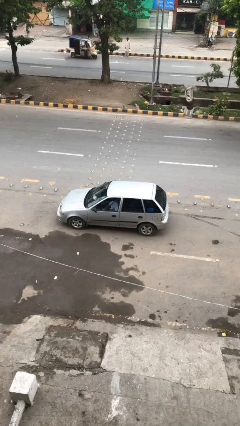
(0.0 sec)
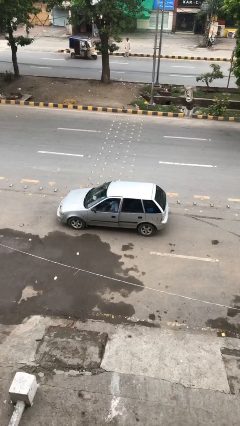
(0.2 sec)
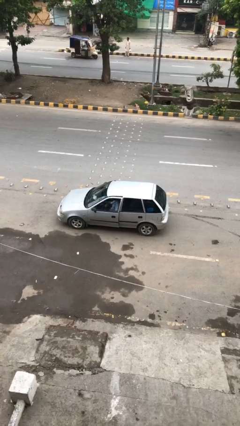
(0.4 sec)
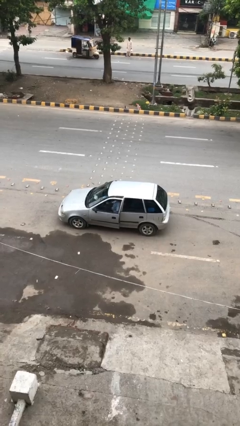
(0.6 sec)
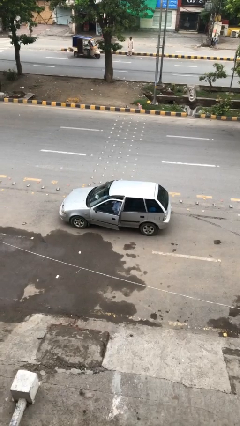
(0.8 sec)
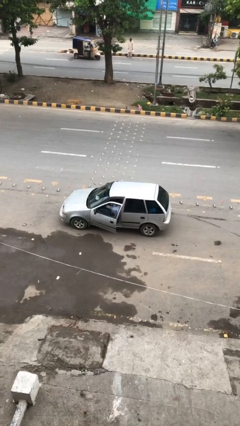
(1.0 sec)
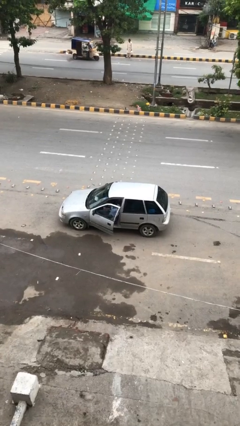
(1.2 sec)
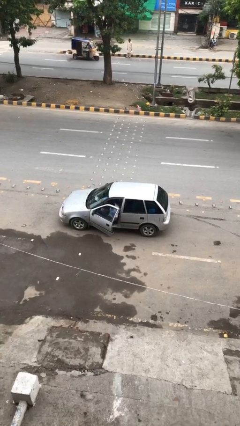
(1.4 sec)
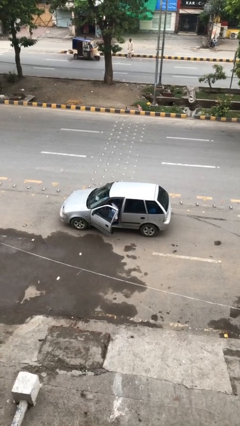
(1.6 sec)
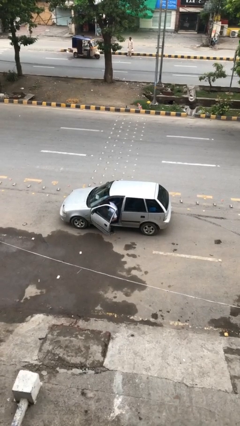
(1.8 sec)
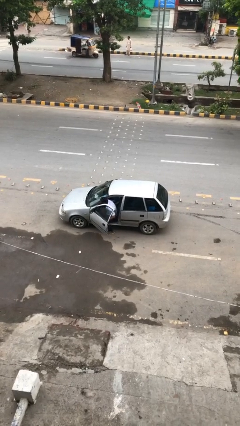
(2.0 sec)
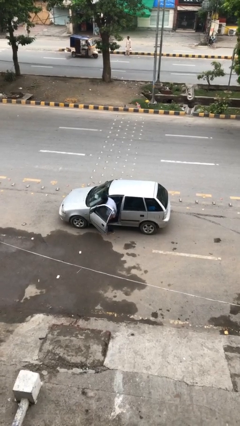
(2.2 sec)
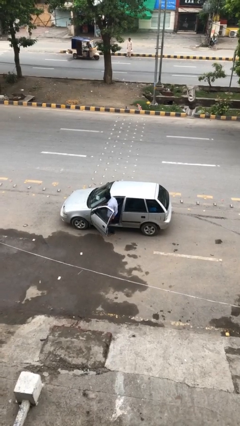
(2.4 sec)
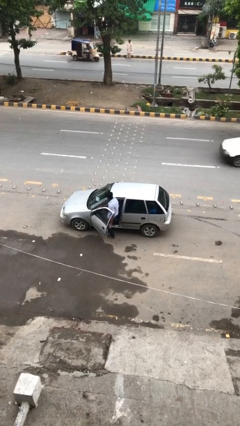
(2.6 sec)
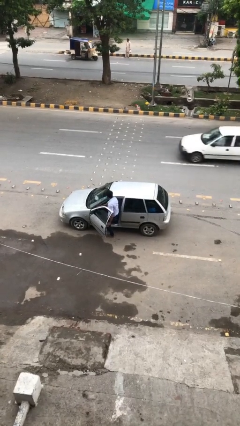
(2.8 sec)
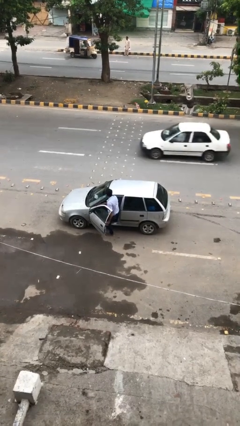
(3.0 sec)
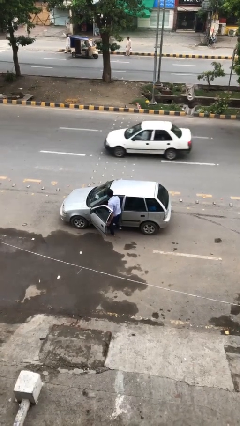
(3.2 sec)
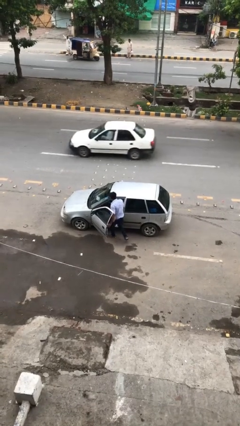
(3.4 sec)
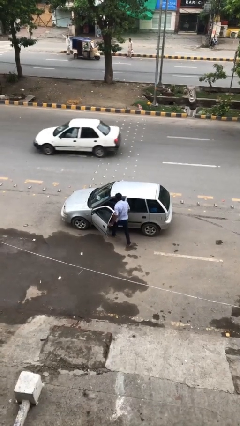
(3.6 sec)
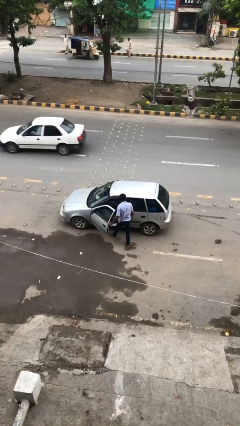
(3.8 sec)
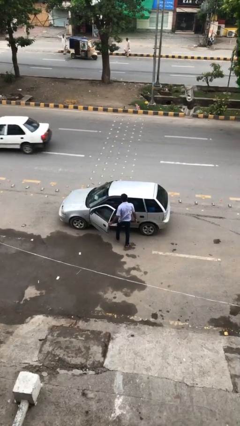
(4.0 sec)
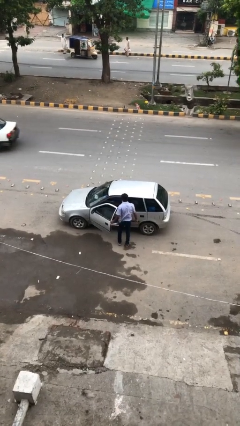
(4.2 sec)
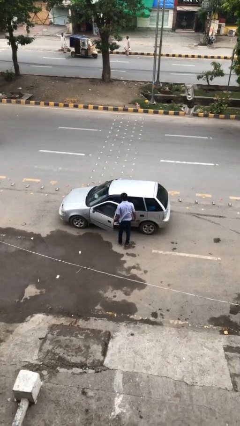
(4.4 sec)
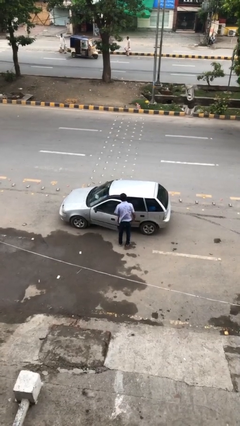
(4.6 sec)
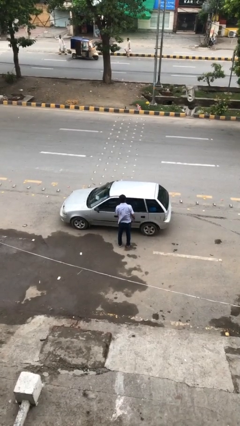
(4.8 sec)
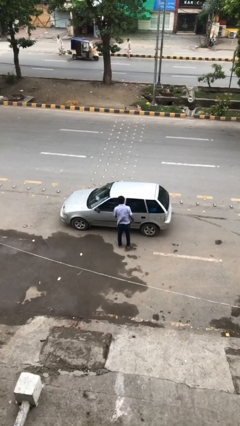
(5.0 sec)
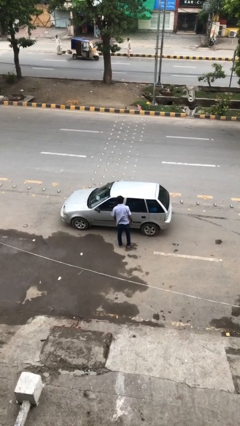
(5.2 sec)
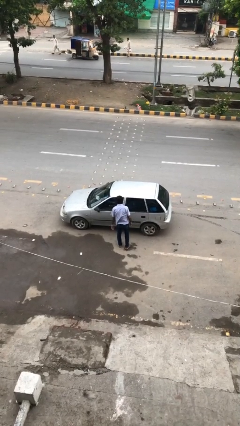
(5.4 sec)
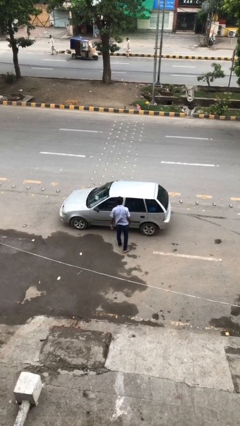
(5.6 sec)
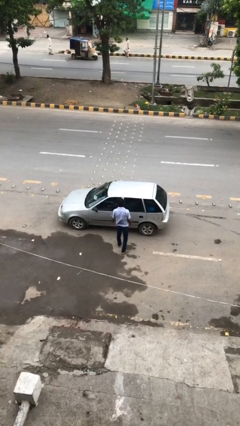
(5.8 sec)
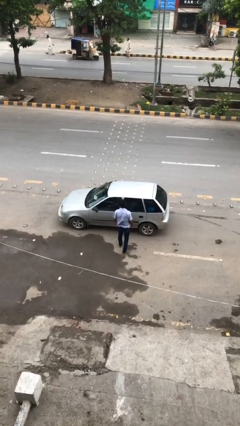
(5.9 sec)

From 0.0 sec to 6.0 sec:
car drops off person

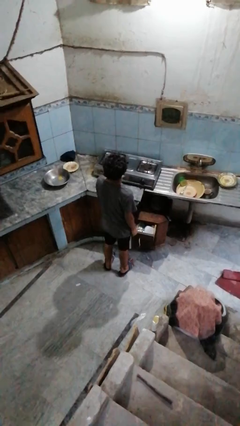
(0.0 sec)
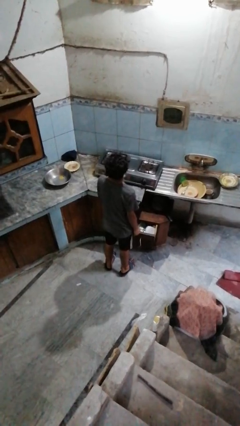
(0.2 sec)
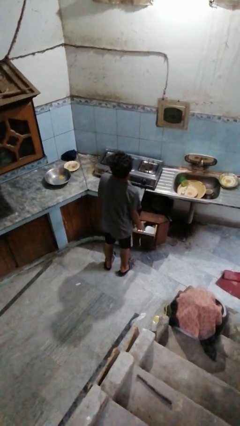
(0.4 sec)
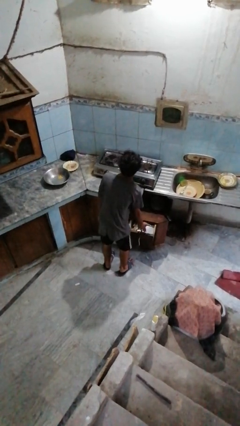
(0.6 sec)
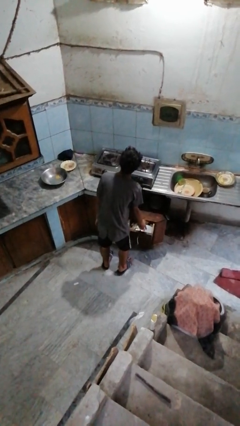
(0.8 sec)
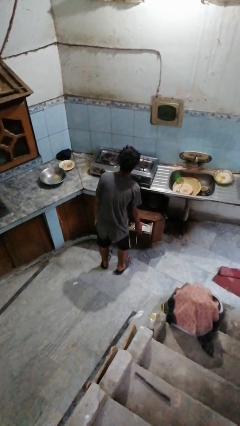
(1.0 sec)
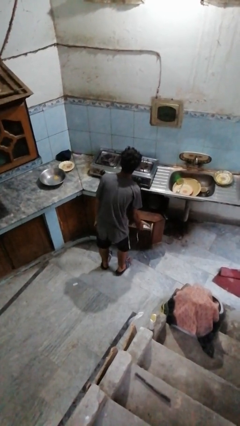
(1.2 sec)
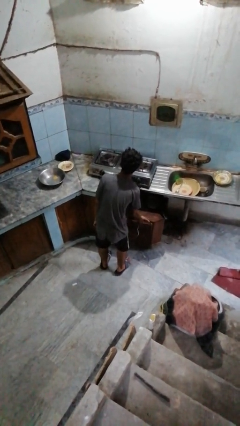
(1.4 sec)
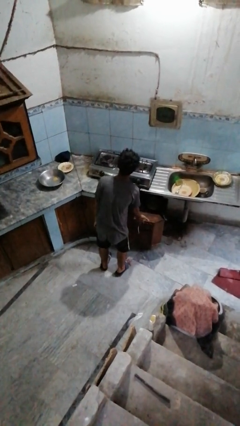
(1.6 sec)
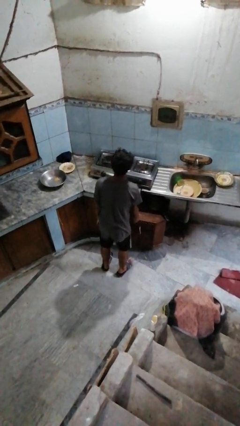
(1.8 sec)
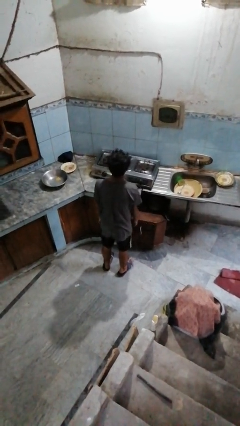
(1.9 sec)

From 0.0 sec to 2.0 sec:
person closes kitchen drawer

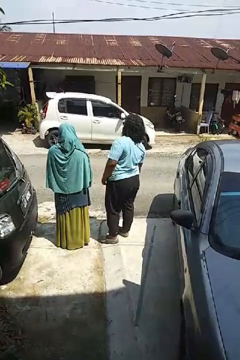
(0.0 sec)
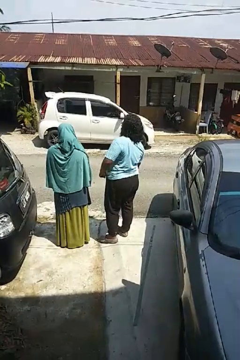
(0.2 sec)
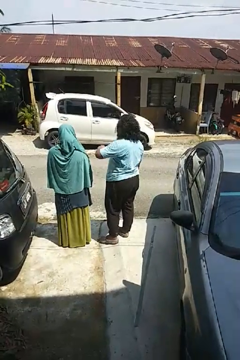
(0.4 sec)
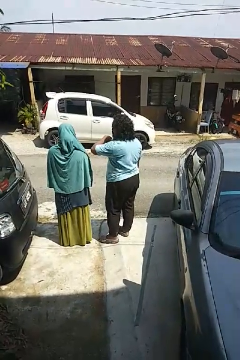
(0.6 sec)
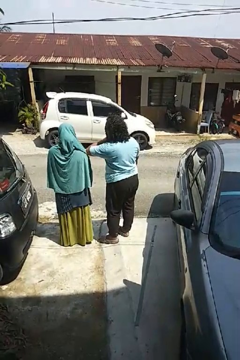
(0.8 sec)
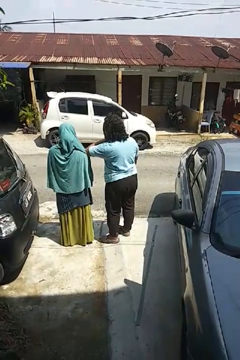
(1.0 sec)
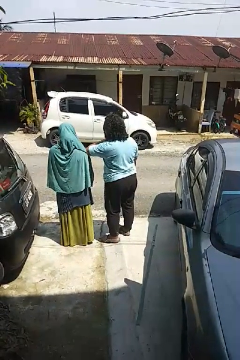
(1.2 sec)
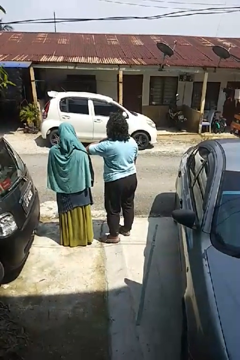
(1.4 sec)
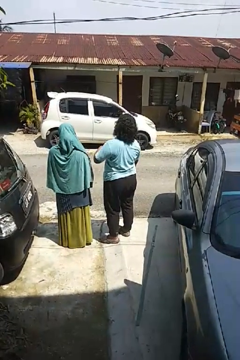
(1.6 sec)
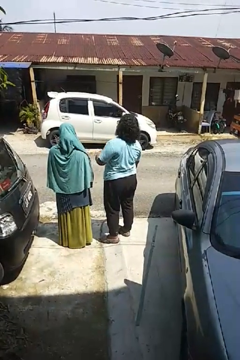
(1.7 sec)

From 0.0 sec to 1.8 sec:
person nudges person with elbow

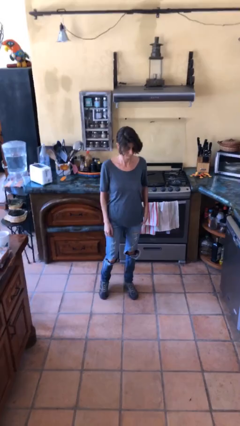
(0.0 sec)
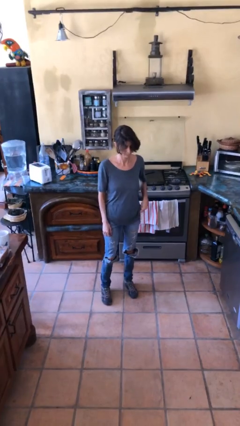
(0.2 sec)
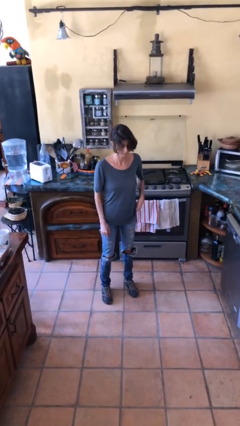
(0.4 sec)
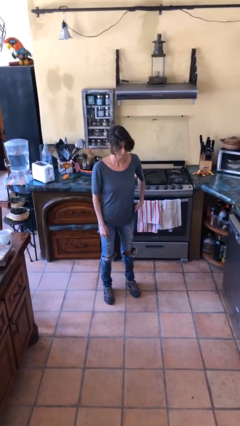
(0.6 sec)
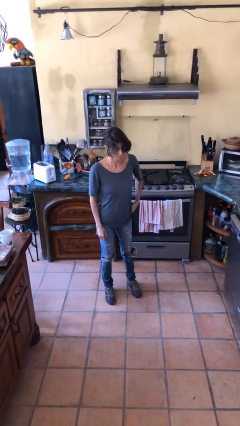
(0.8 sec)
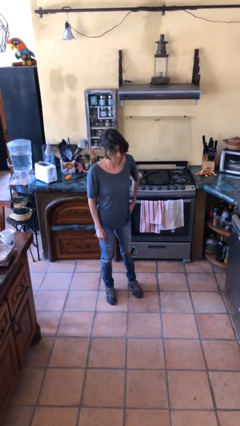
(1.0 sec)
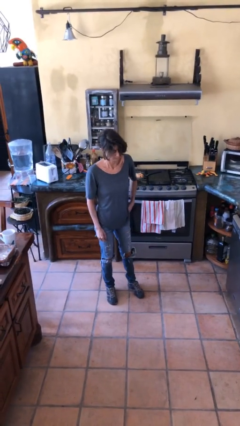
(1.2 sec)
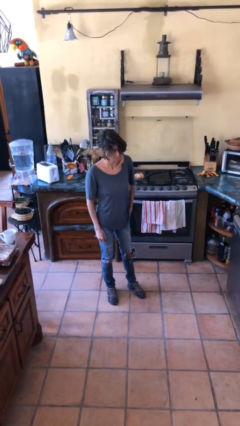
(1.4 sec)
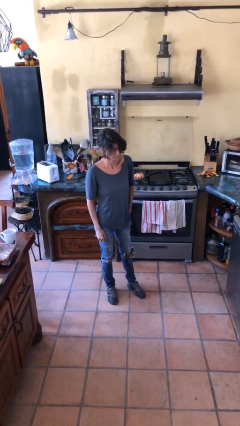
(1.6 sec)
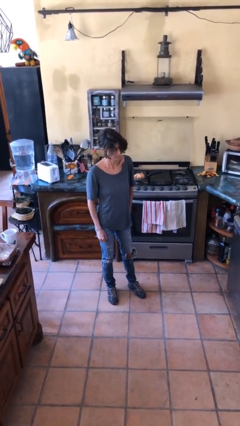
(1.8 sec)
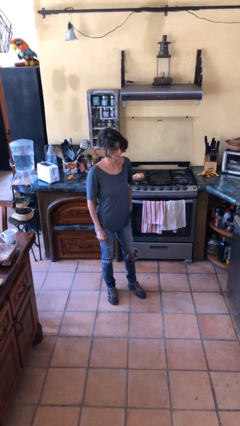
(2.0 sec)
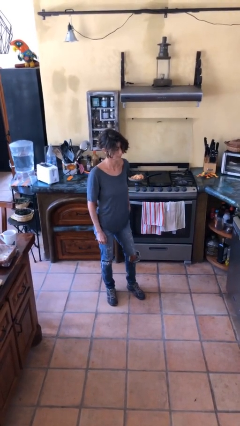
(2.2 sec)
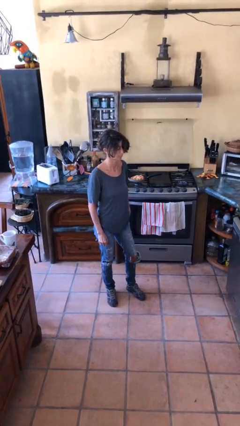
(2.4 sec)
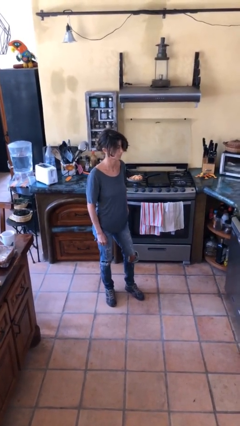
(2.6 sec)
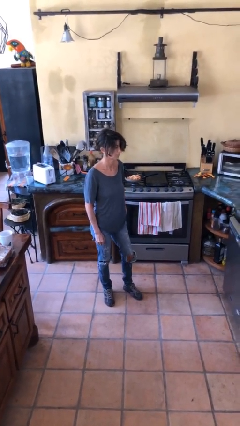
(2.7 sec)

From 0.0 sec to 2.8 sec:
person puts hands in back pockets

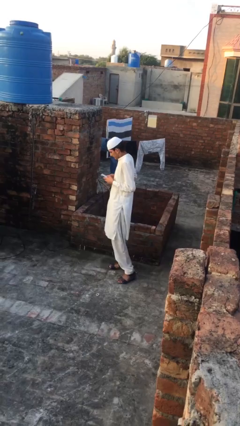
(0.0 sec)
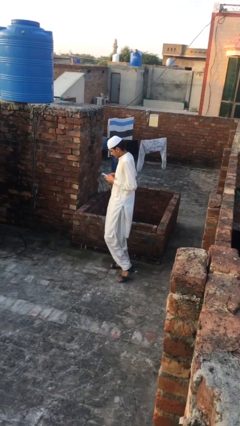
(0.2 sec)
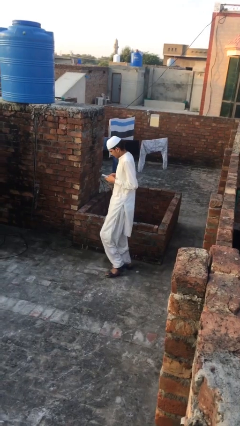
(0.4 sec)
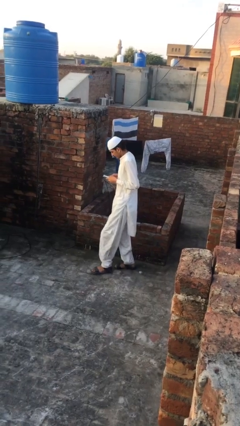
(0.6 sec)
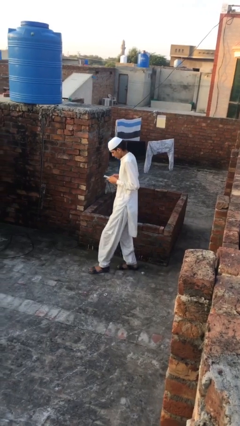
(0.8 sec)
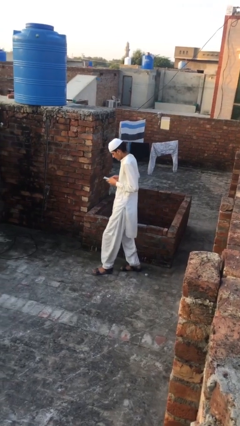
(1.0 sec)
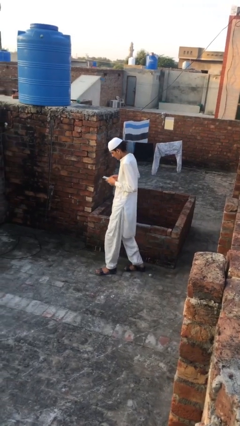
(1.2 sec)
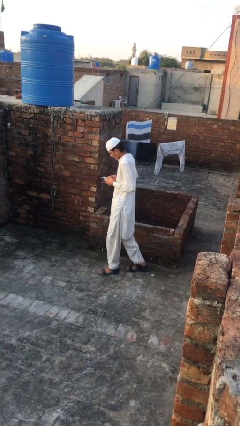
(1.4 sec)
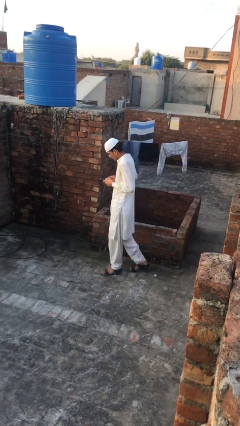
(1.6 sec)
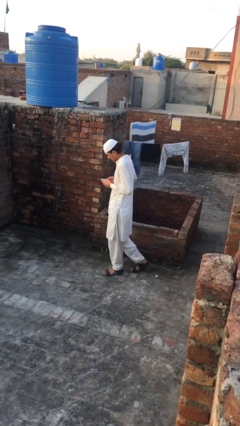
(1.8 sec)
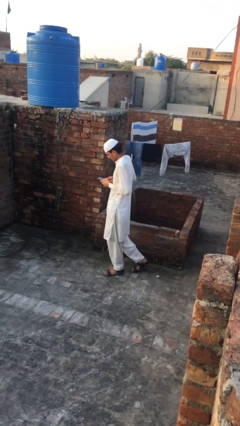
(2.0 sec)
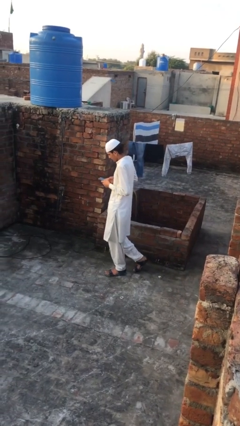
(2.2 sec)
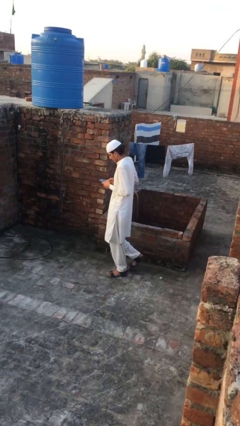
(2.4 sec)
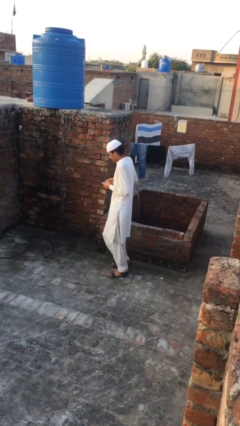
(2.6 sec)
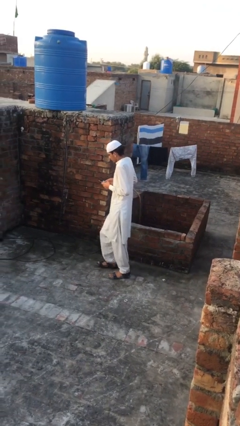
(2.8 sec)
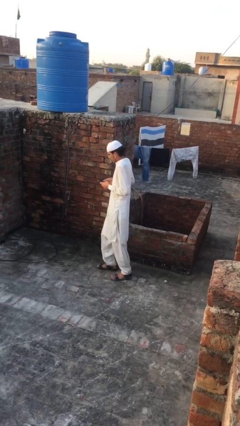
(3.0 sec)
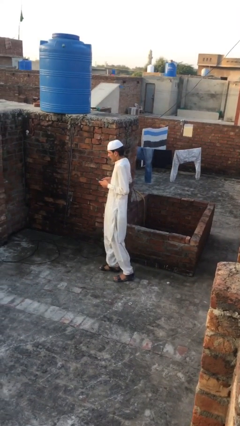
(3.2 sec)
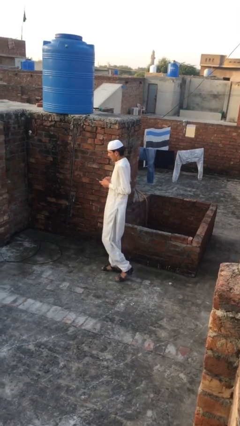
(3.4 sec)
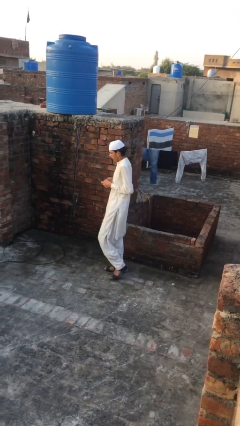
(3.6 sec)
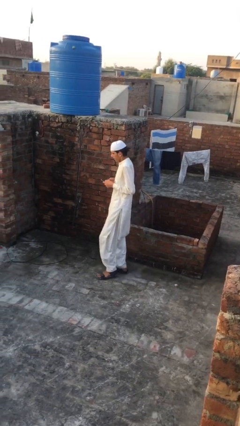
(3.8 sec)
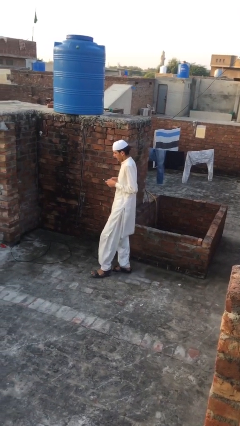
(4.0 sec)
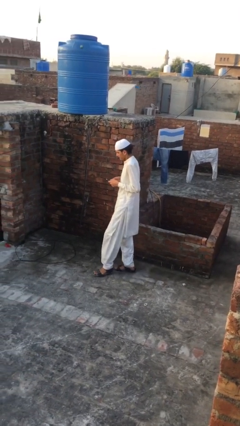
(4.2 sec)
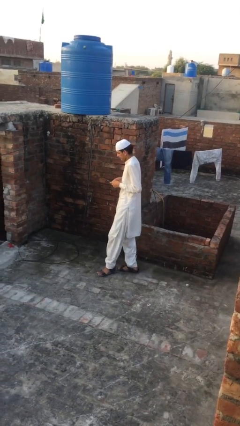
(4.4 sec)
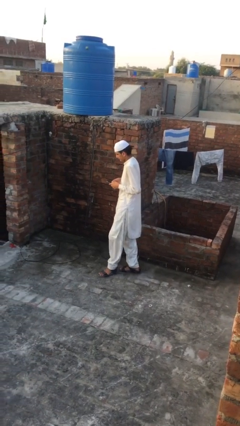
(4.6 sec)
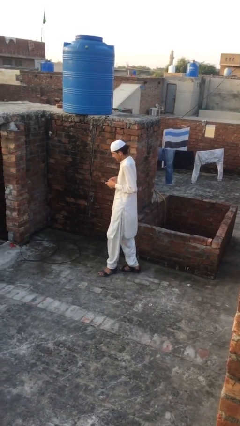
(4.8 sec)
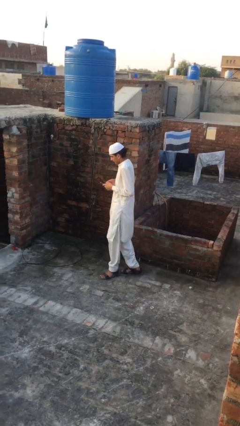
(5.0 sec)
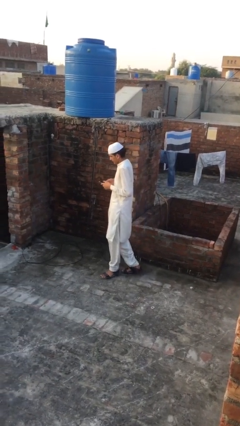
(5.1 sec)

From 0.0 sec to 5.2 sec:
person texts on phone
